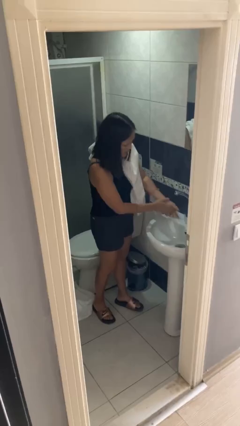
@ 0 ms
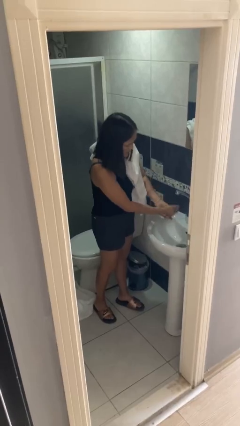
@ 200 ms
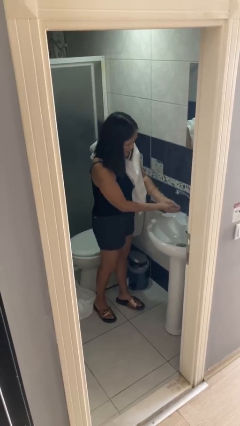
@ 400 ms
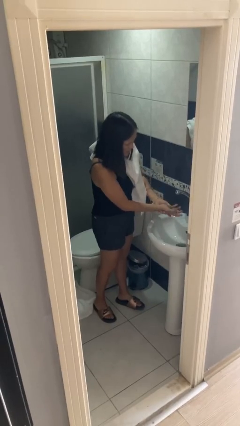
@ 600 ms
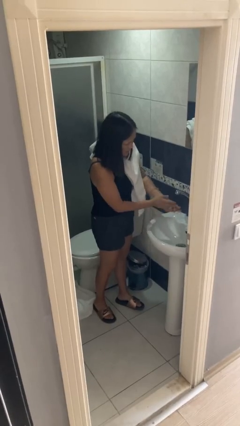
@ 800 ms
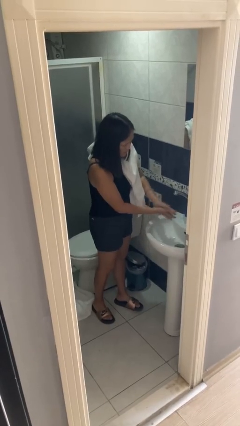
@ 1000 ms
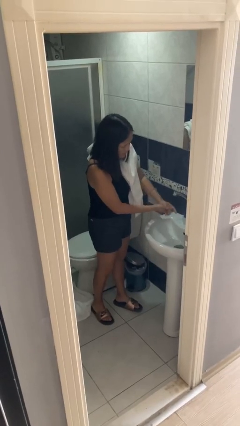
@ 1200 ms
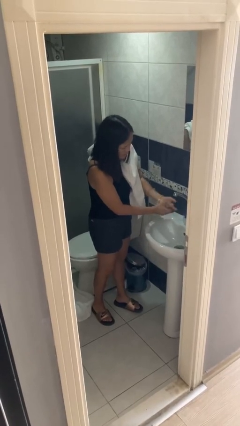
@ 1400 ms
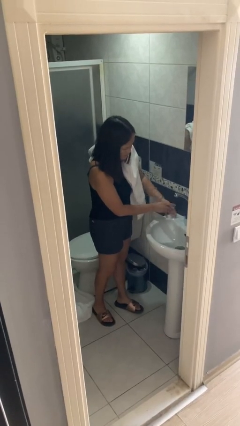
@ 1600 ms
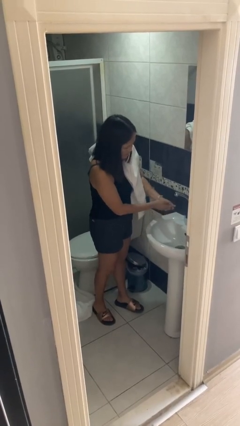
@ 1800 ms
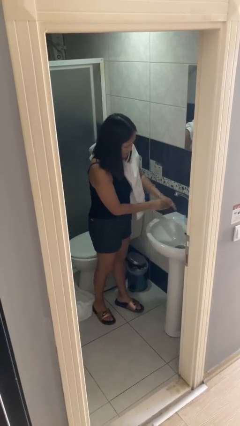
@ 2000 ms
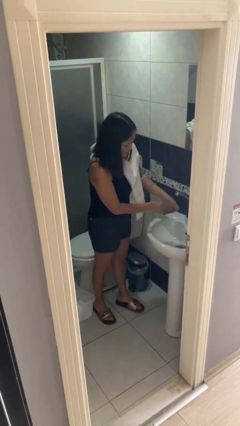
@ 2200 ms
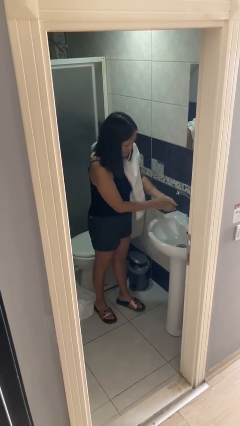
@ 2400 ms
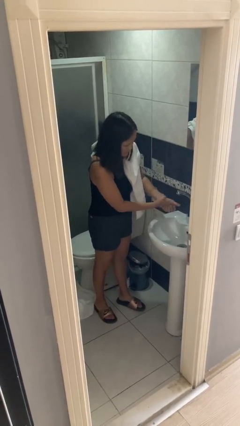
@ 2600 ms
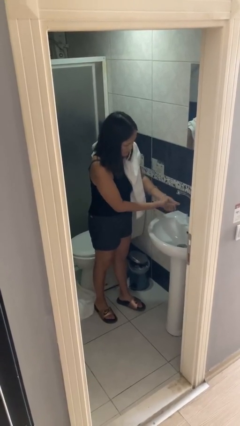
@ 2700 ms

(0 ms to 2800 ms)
person washes hands

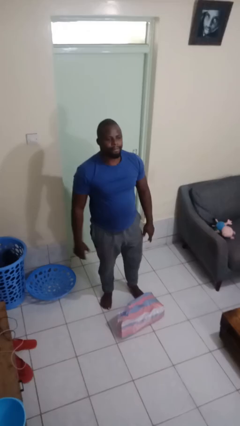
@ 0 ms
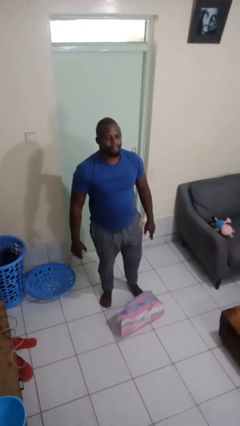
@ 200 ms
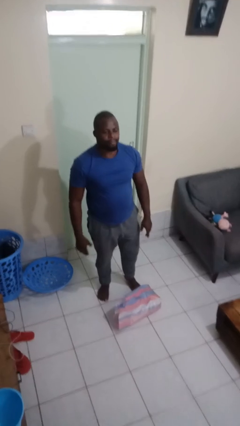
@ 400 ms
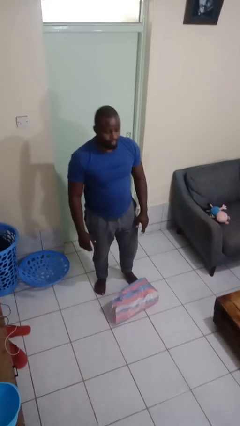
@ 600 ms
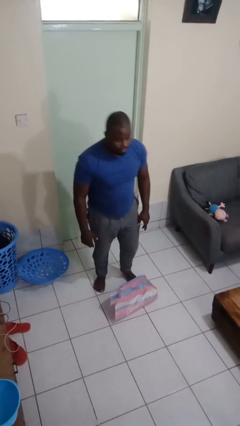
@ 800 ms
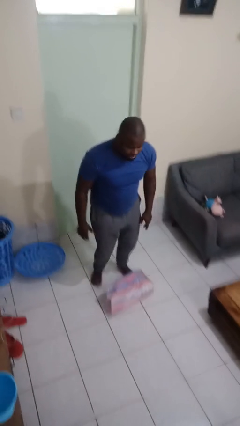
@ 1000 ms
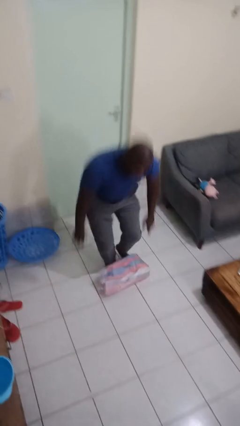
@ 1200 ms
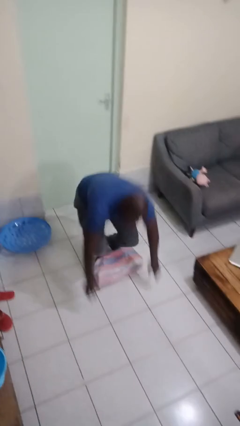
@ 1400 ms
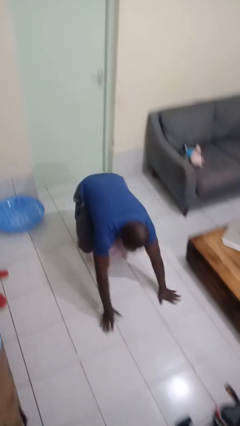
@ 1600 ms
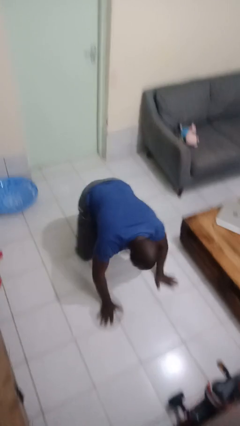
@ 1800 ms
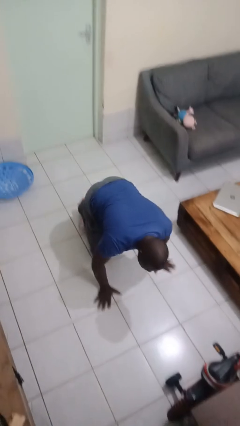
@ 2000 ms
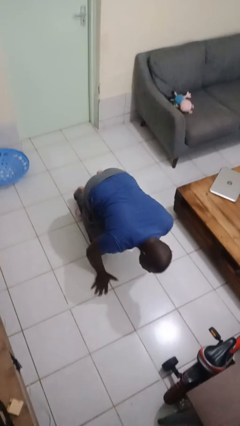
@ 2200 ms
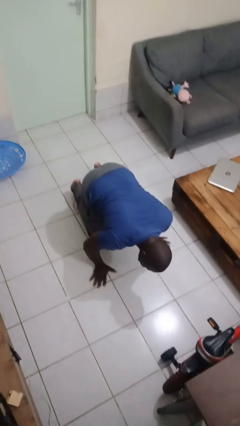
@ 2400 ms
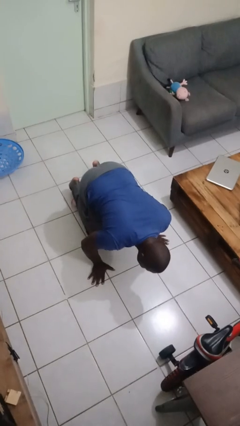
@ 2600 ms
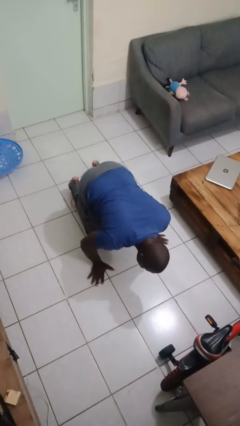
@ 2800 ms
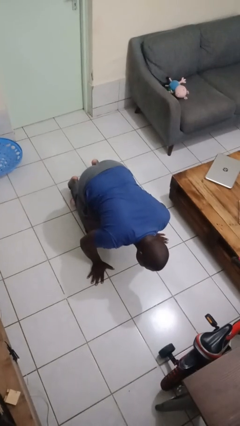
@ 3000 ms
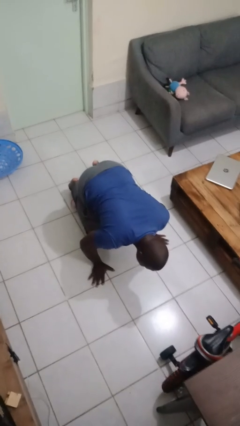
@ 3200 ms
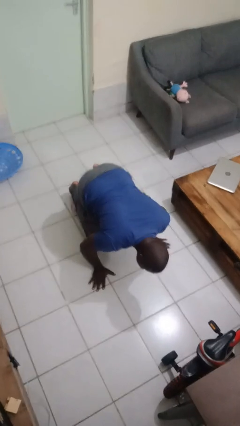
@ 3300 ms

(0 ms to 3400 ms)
person trips on object on floor

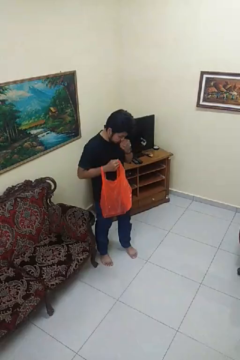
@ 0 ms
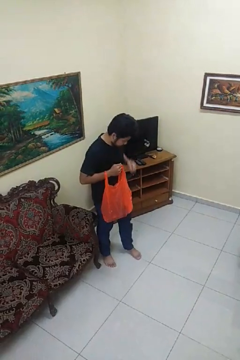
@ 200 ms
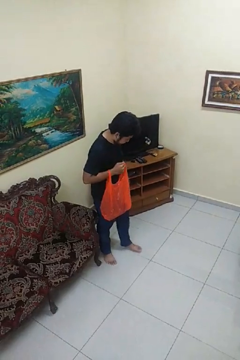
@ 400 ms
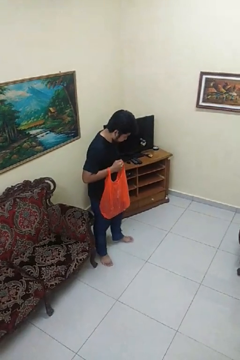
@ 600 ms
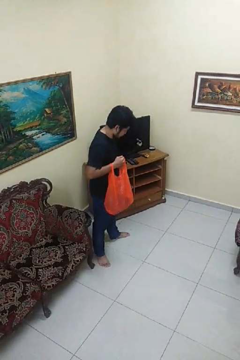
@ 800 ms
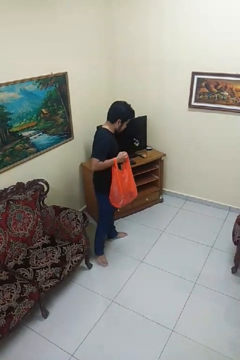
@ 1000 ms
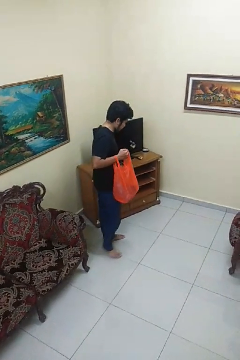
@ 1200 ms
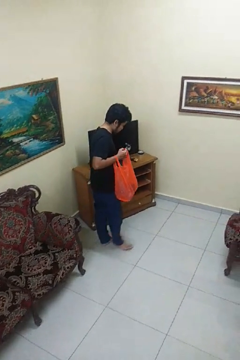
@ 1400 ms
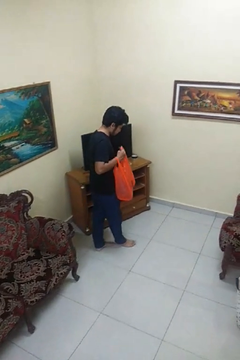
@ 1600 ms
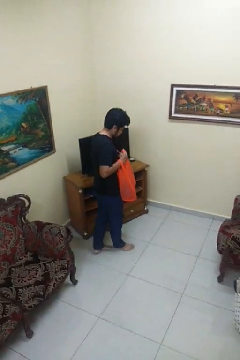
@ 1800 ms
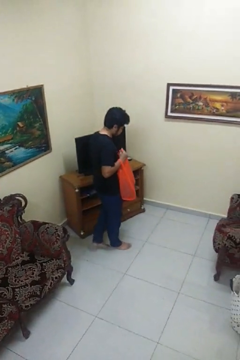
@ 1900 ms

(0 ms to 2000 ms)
person carries groceries

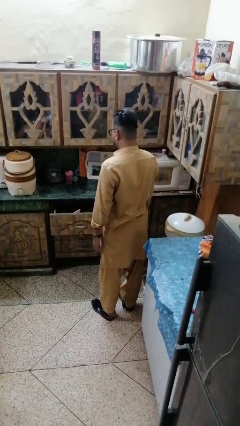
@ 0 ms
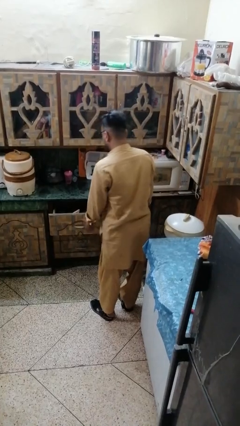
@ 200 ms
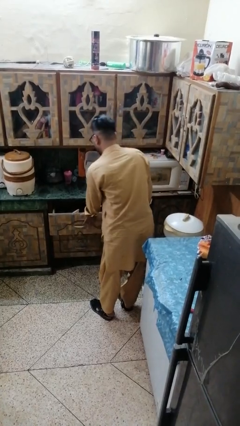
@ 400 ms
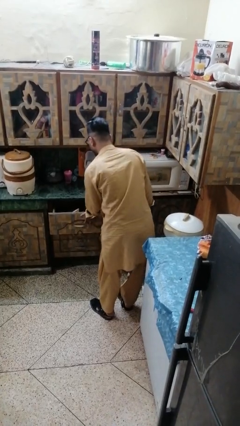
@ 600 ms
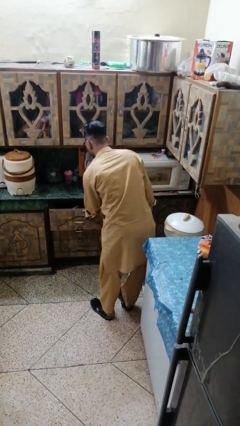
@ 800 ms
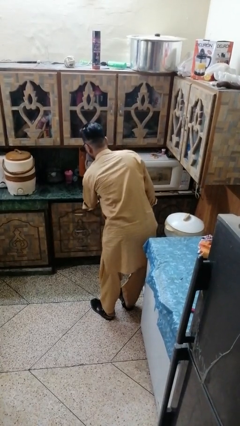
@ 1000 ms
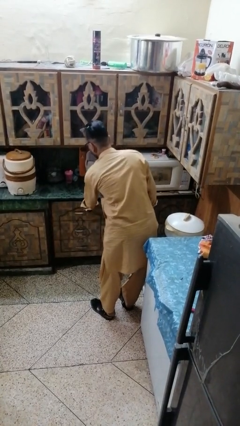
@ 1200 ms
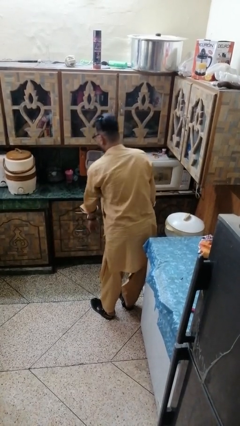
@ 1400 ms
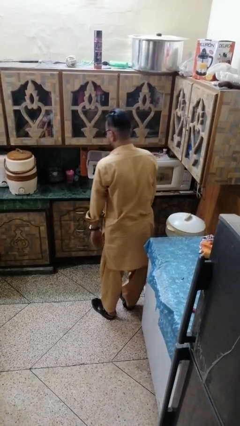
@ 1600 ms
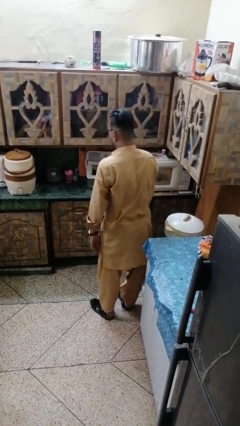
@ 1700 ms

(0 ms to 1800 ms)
person closes kitchen drawer

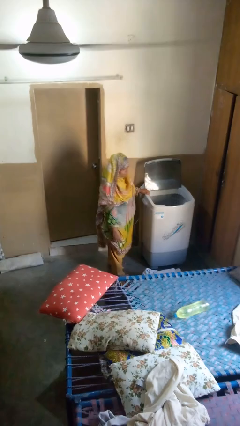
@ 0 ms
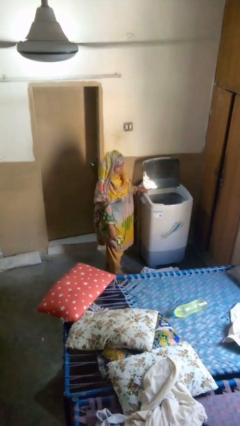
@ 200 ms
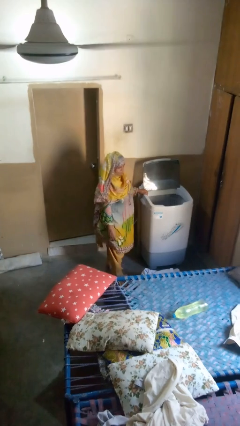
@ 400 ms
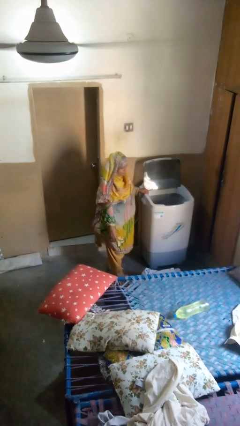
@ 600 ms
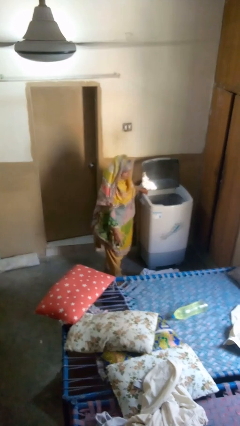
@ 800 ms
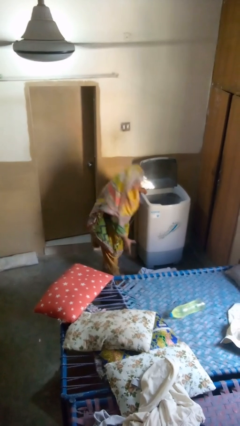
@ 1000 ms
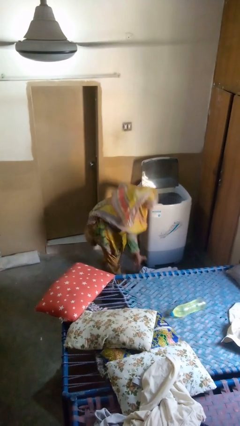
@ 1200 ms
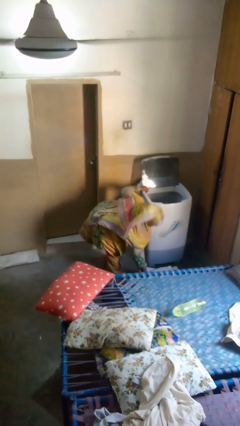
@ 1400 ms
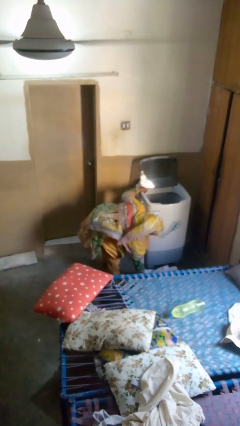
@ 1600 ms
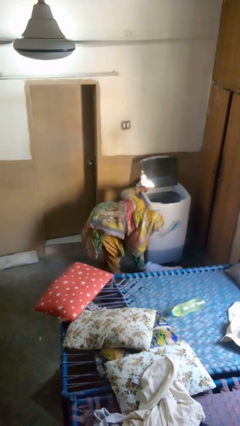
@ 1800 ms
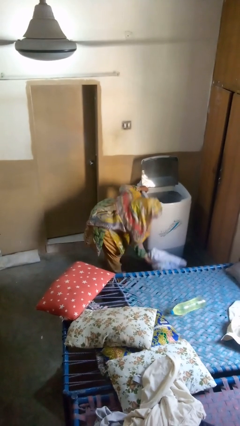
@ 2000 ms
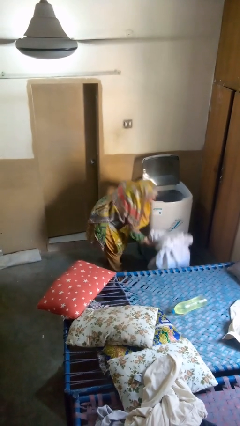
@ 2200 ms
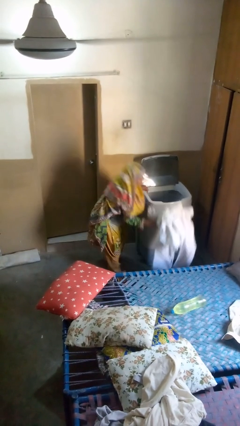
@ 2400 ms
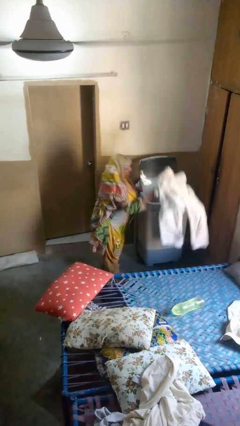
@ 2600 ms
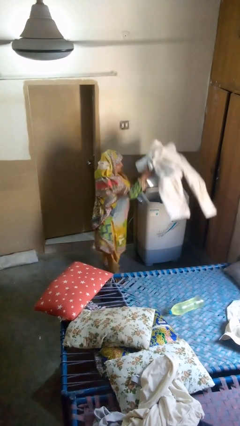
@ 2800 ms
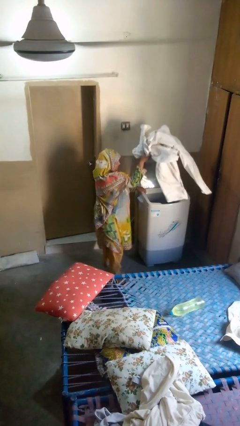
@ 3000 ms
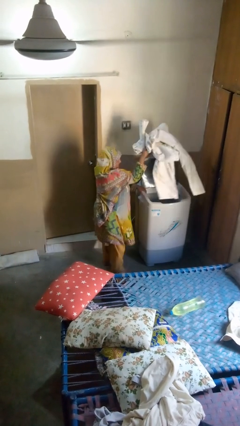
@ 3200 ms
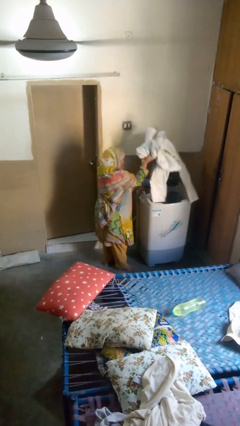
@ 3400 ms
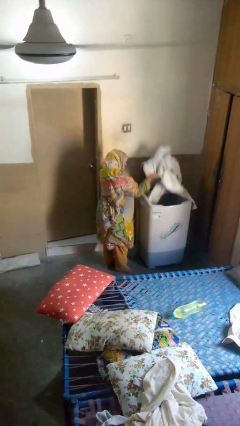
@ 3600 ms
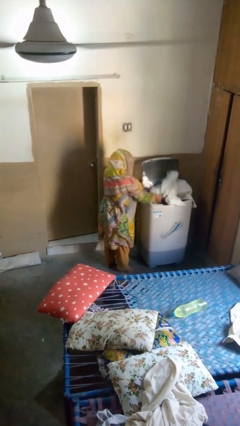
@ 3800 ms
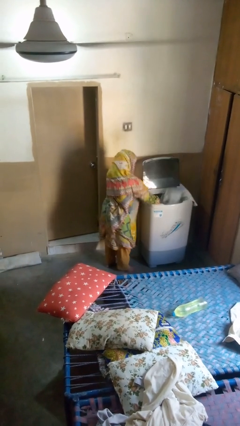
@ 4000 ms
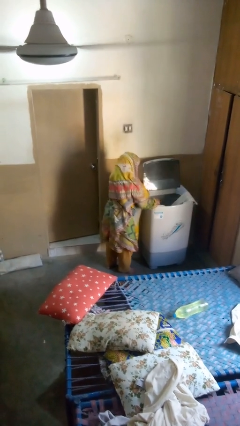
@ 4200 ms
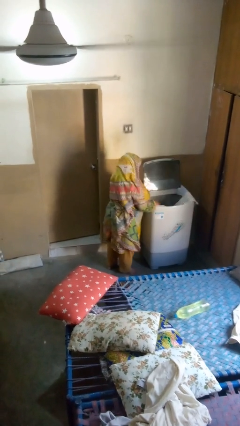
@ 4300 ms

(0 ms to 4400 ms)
person loads clotheswasher

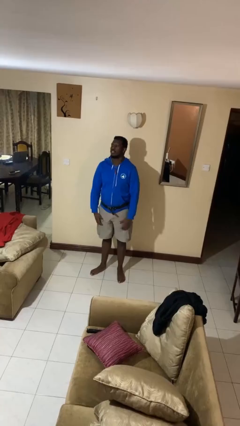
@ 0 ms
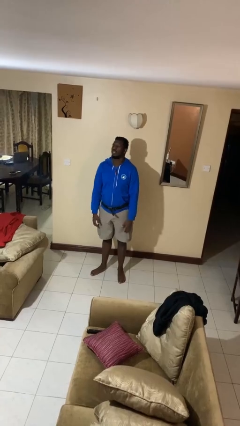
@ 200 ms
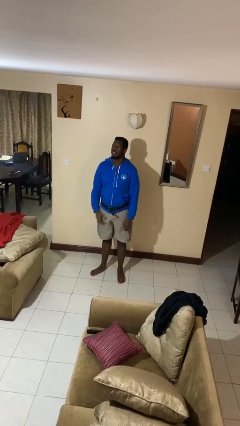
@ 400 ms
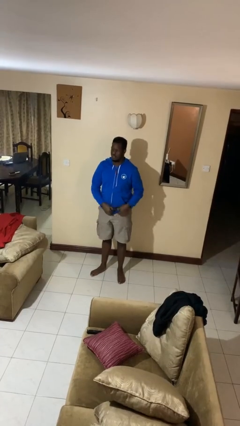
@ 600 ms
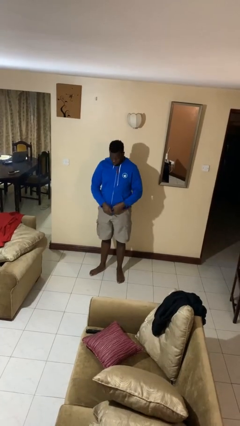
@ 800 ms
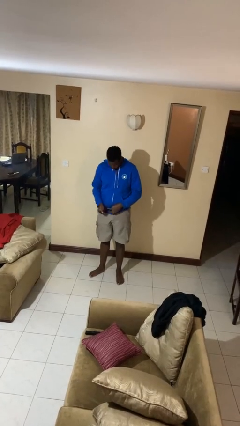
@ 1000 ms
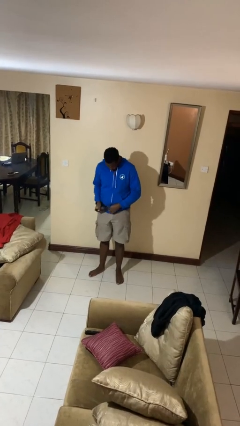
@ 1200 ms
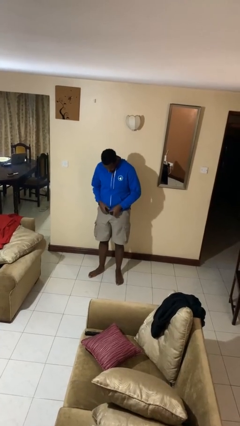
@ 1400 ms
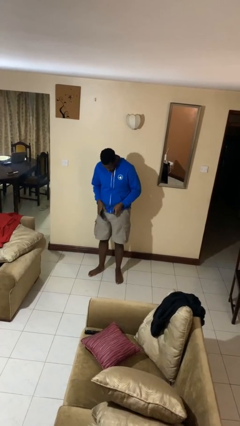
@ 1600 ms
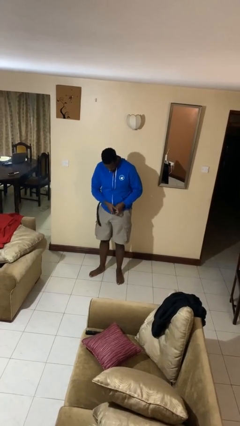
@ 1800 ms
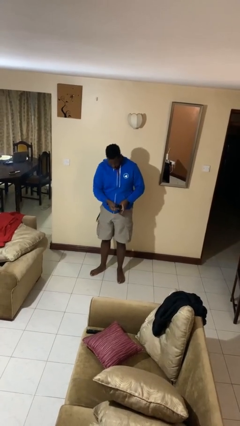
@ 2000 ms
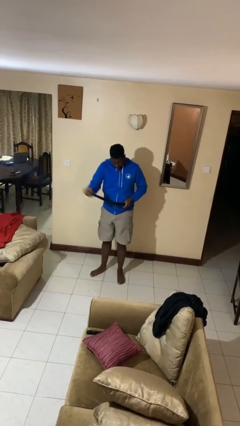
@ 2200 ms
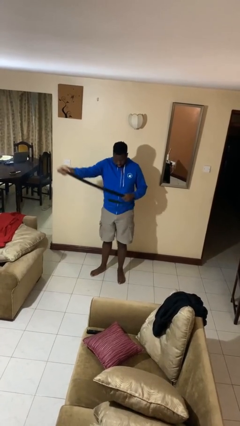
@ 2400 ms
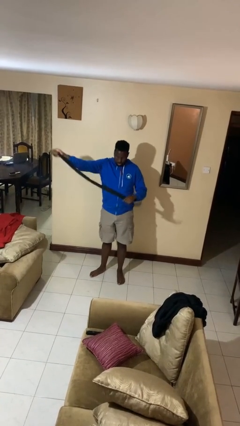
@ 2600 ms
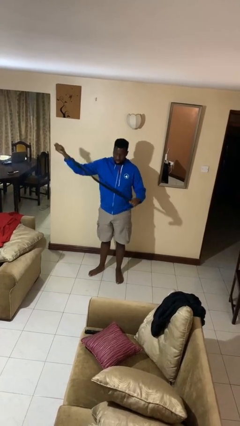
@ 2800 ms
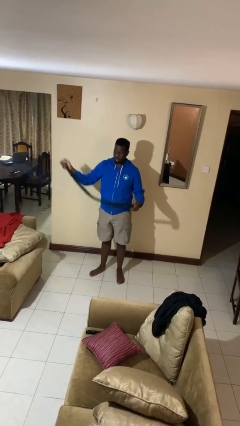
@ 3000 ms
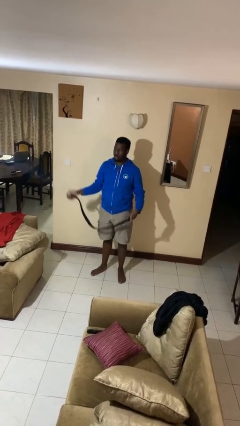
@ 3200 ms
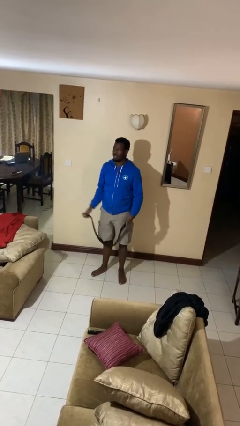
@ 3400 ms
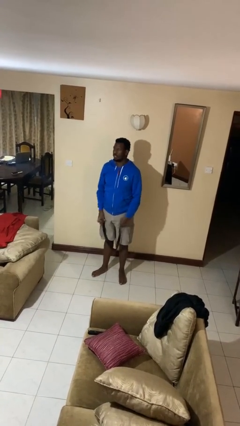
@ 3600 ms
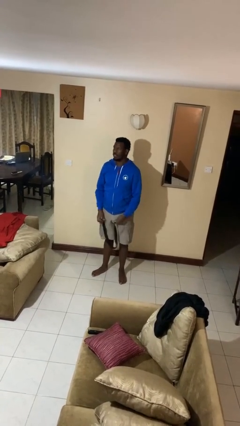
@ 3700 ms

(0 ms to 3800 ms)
person takes off belt
